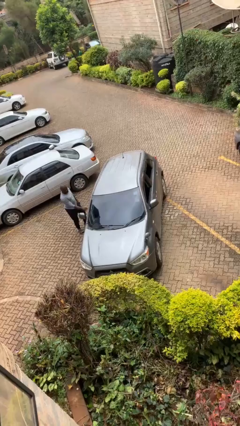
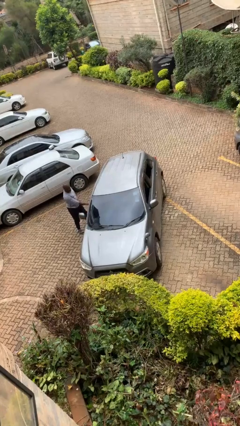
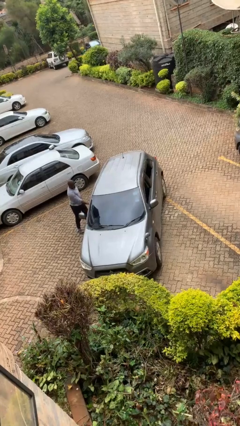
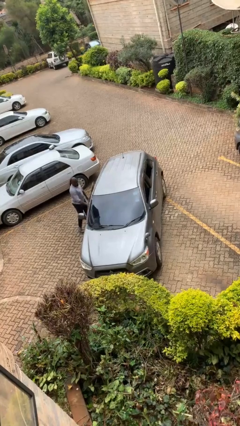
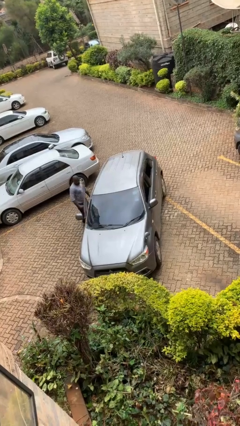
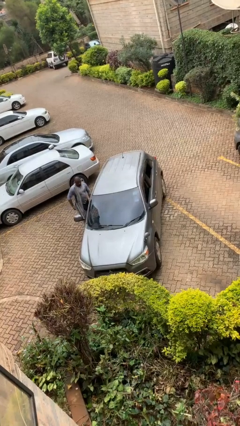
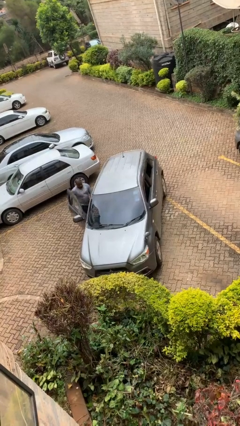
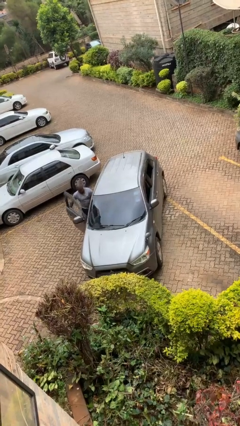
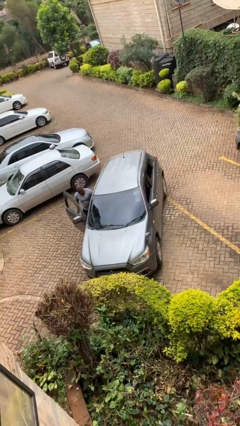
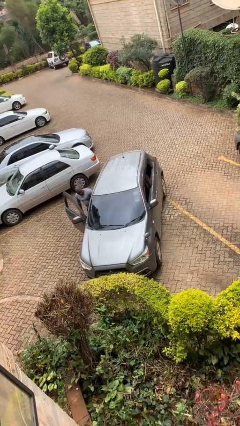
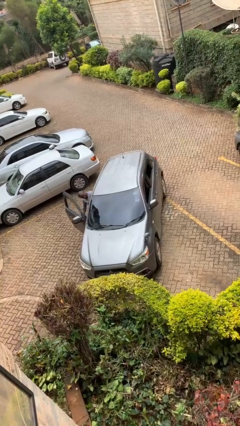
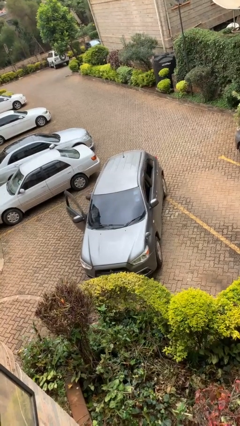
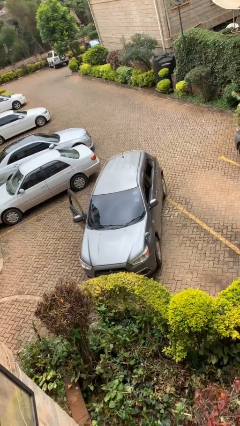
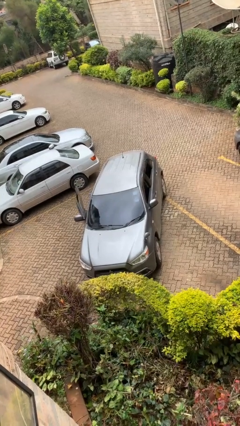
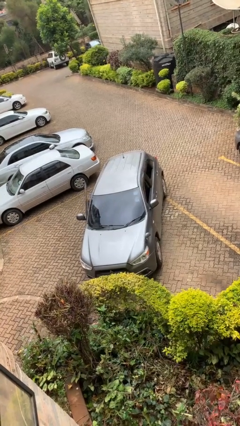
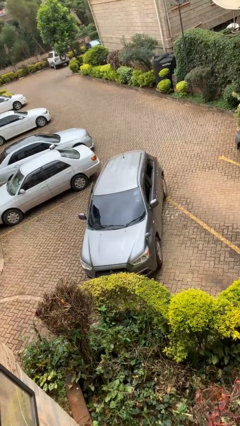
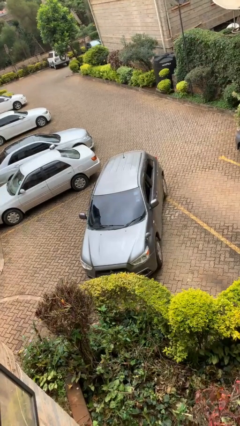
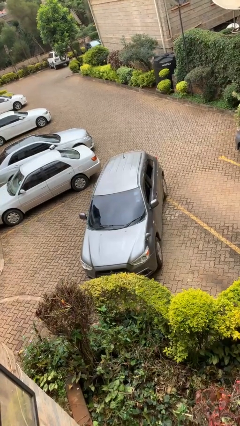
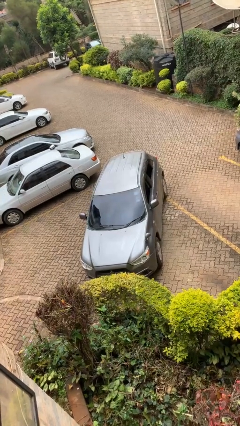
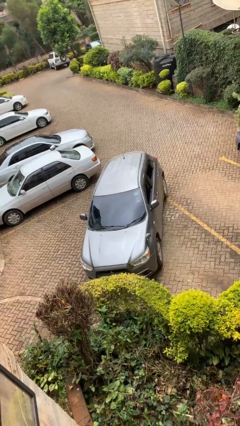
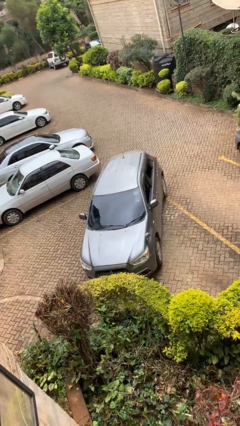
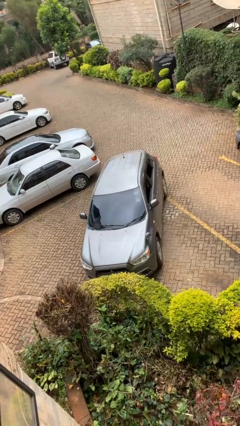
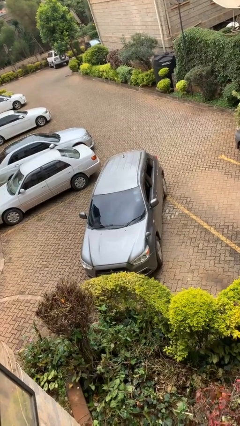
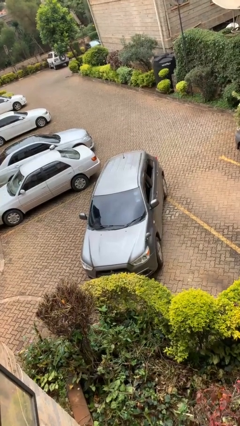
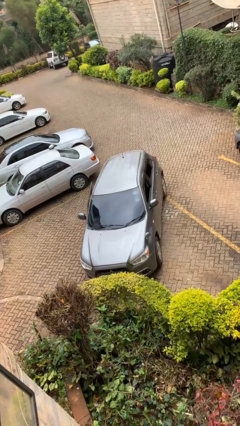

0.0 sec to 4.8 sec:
car picks up person

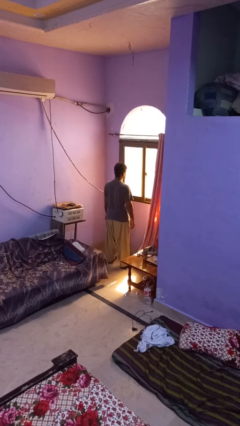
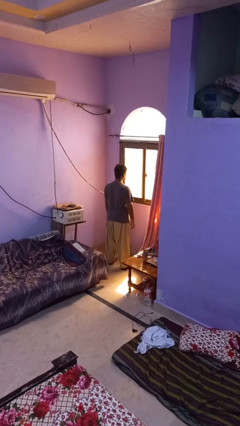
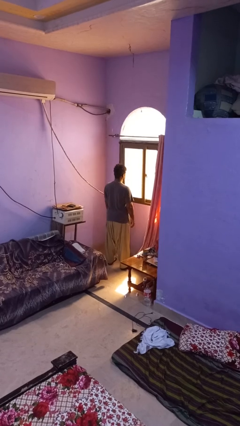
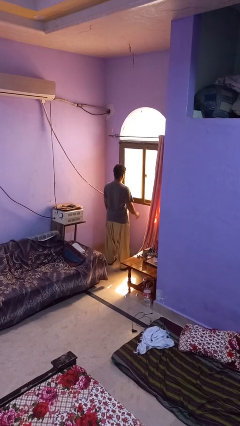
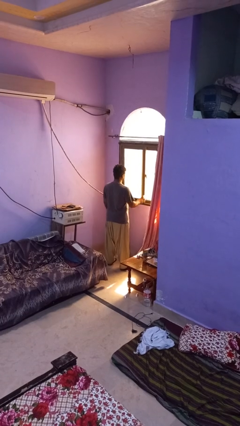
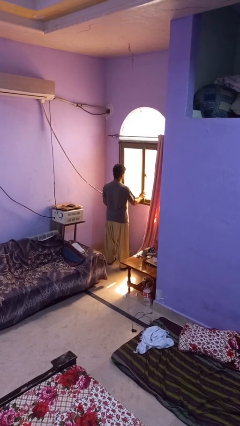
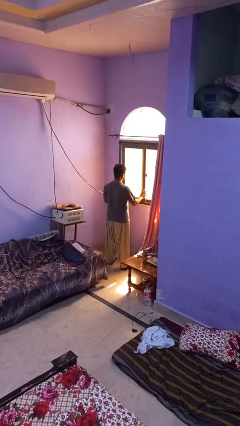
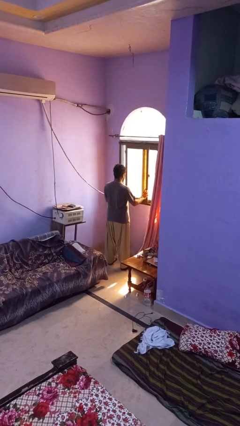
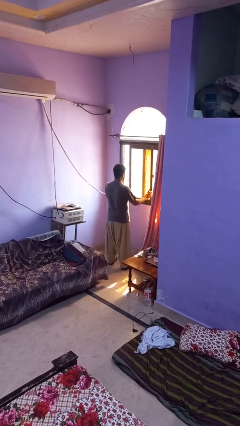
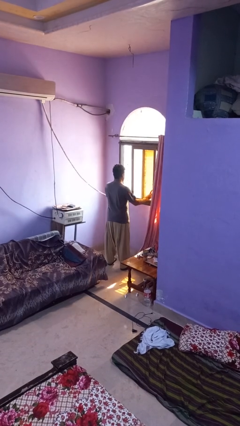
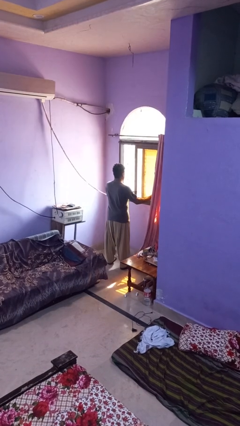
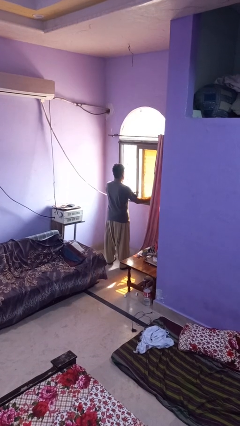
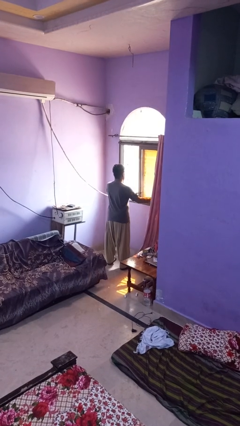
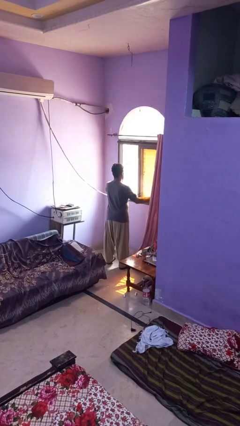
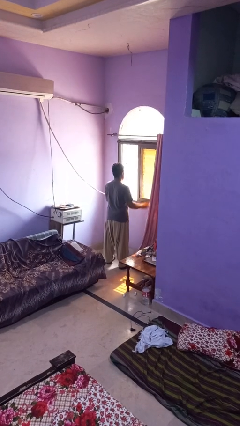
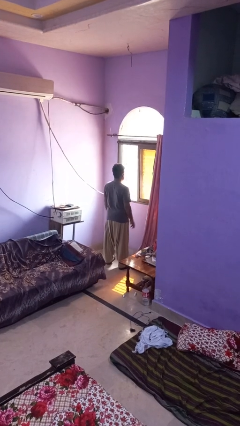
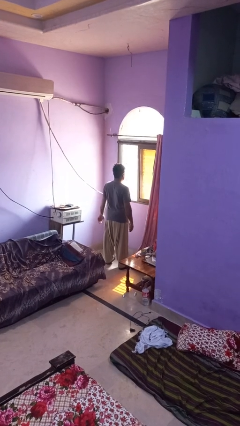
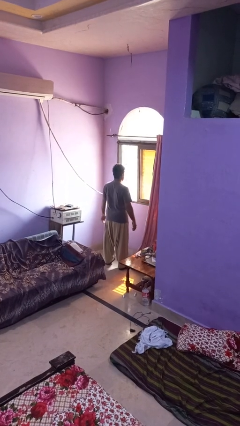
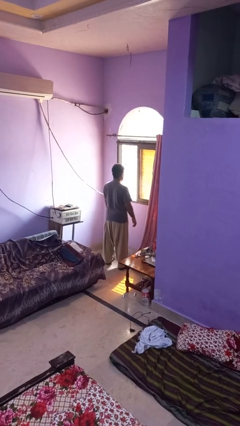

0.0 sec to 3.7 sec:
person opens home window

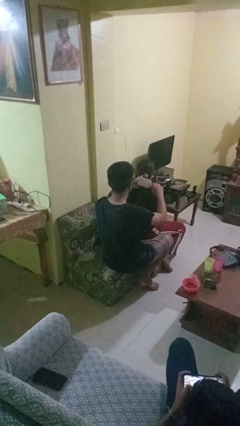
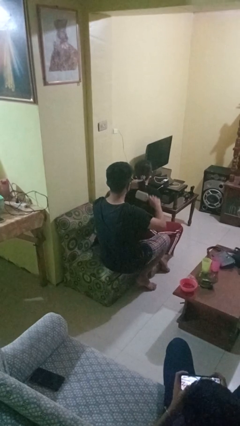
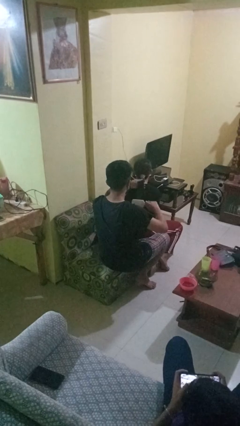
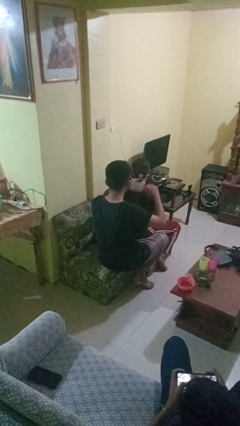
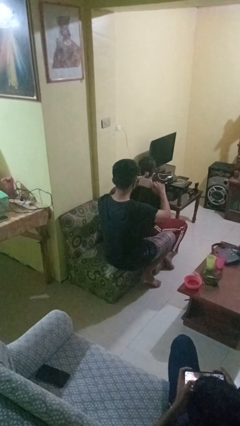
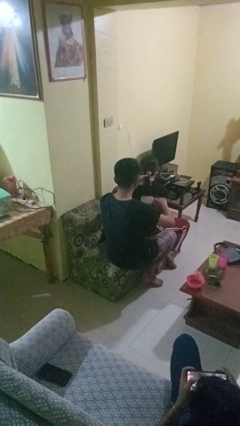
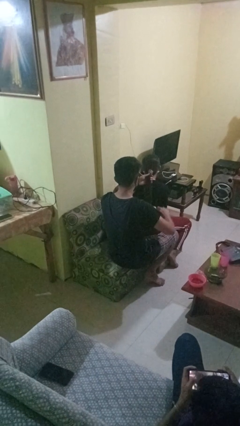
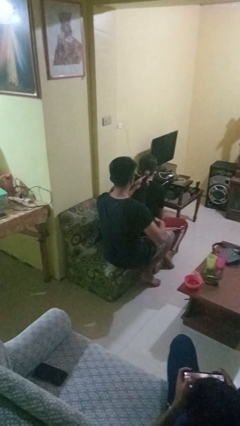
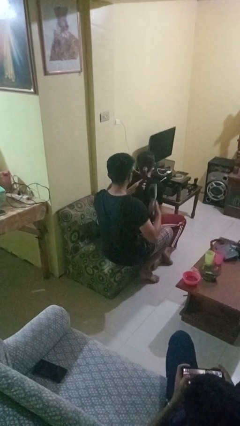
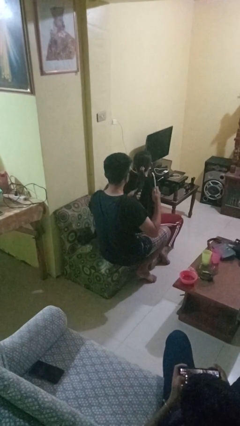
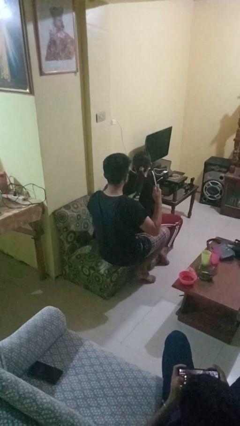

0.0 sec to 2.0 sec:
person brushes hair of person

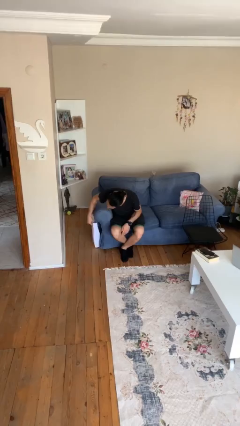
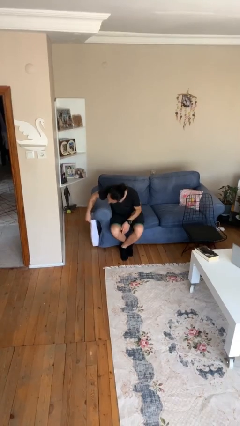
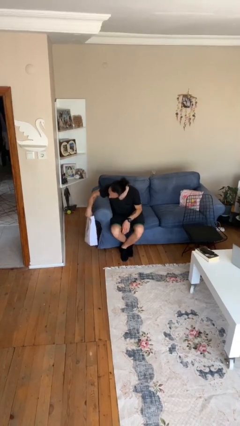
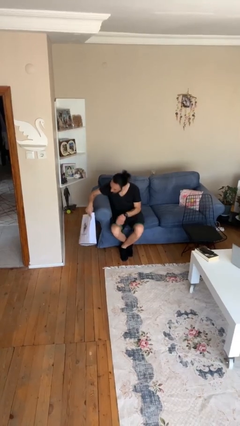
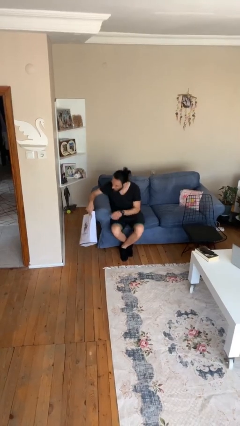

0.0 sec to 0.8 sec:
person picks up object from floor

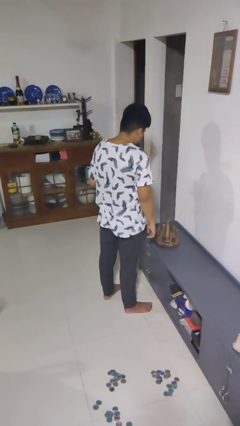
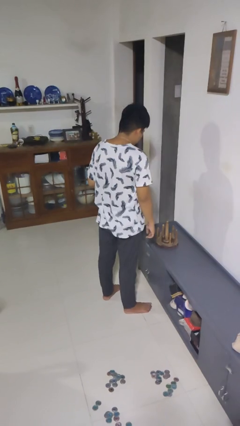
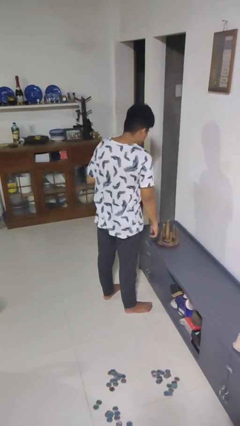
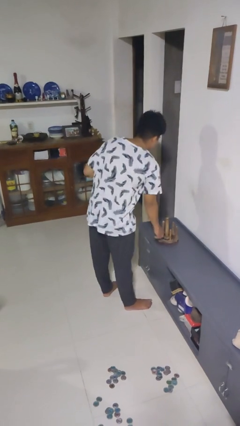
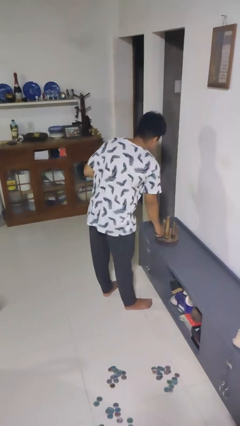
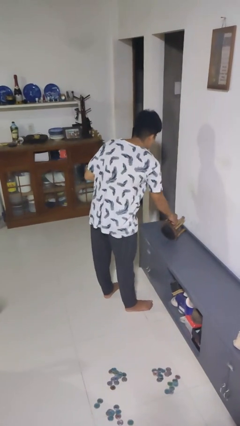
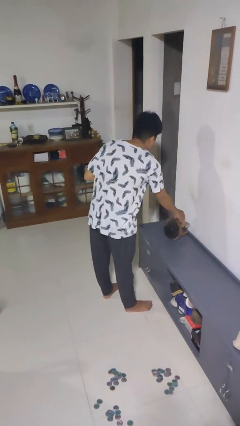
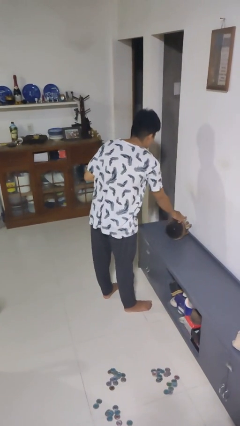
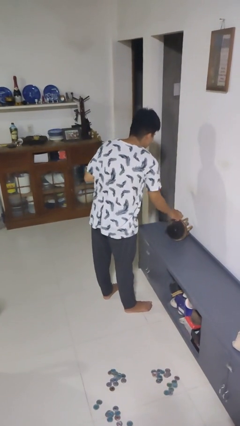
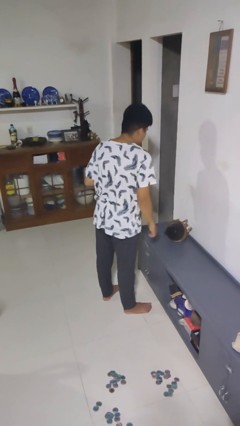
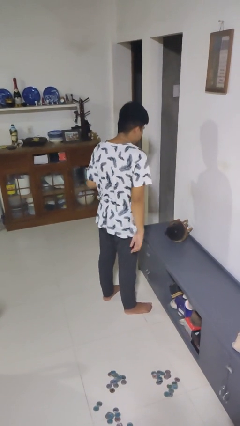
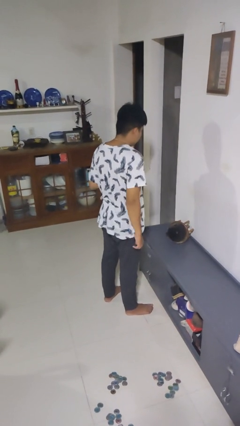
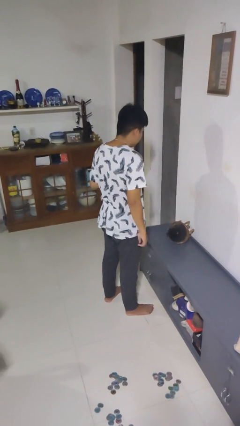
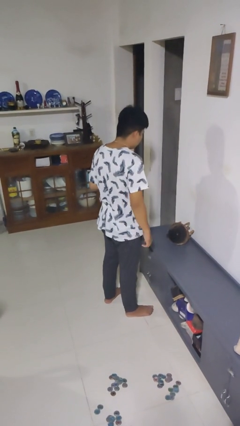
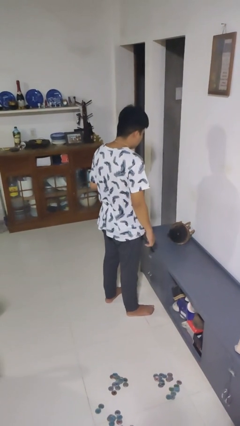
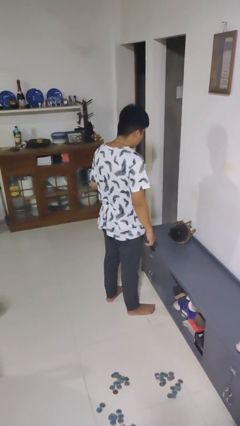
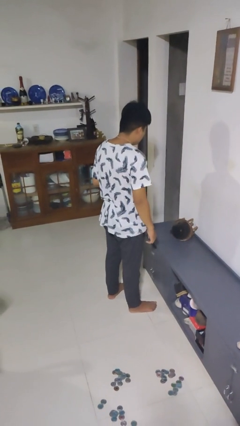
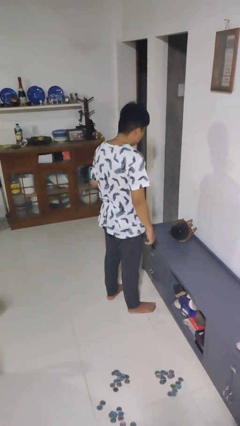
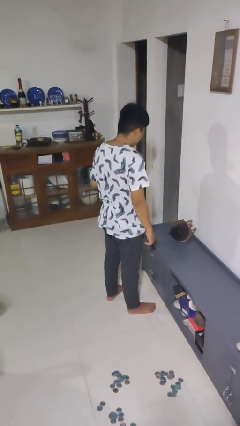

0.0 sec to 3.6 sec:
person knocks over furniture

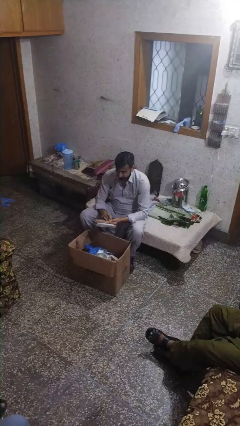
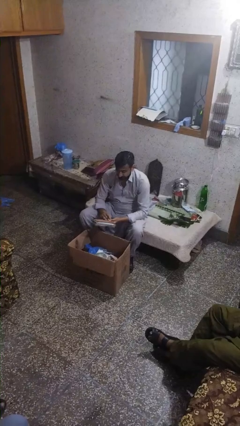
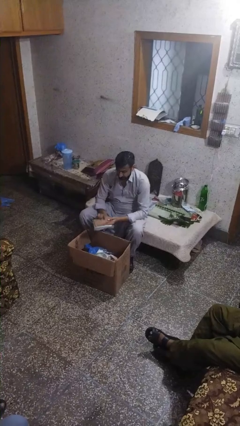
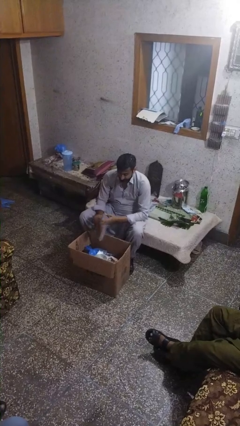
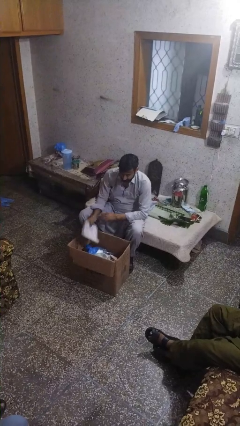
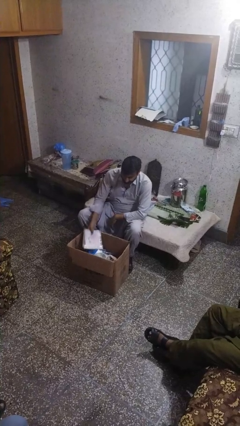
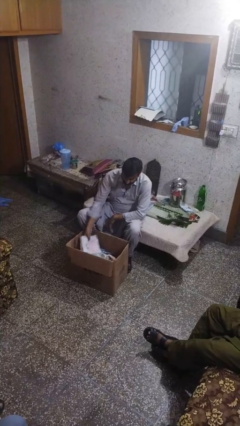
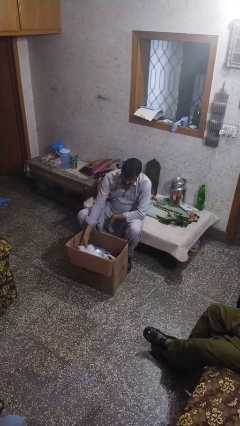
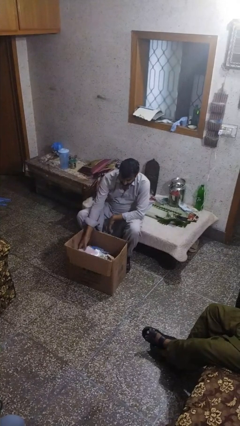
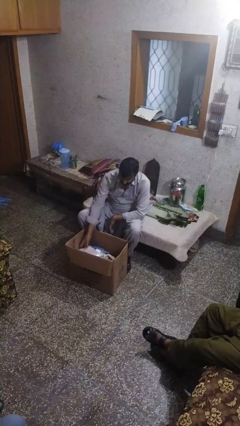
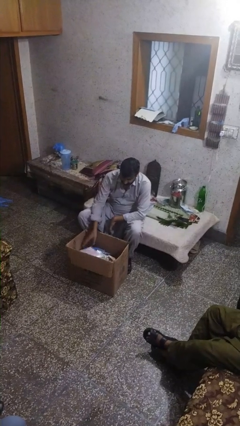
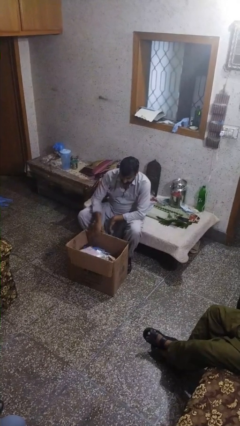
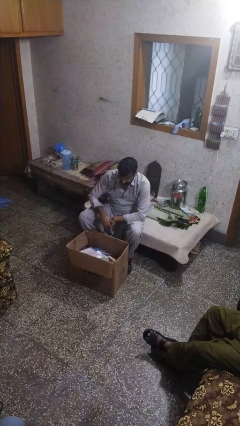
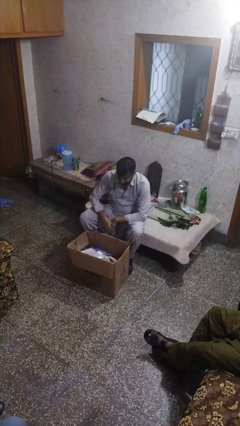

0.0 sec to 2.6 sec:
person puts object into box

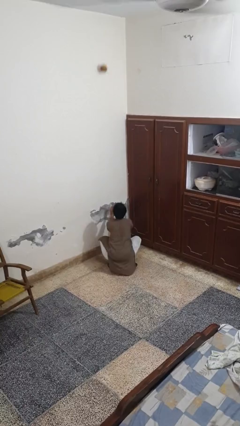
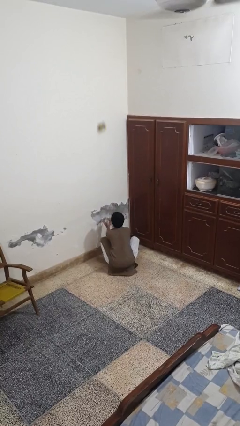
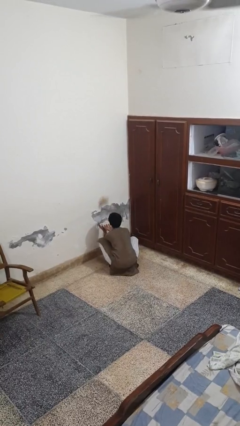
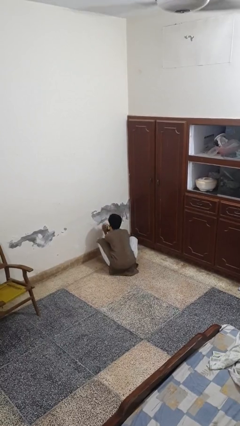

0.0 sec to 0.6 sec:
person catches dropped object
